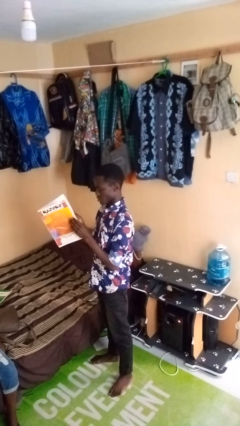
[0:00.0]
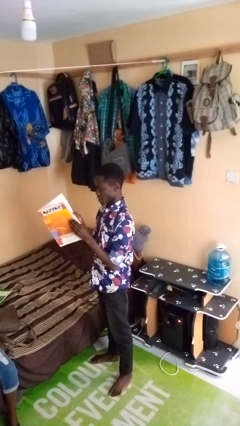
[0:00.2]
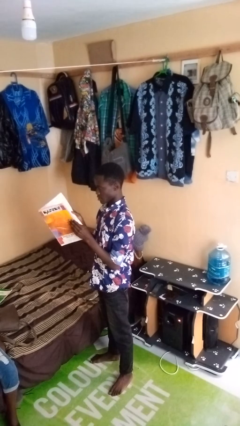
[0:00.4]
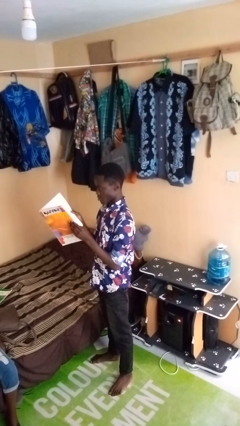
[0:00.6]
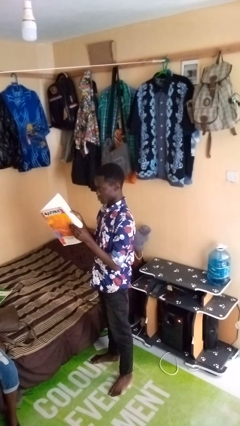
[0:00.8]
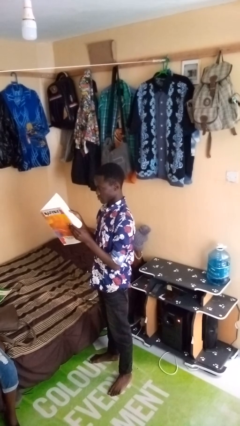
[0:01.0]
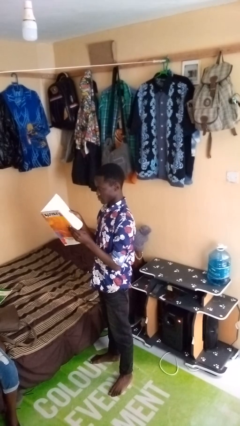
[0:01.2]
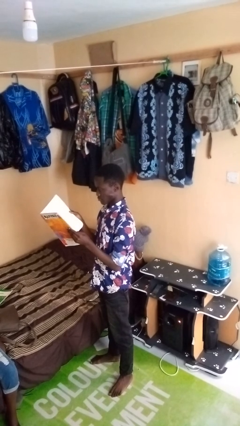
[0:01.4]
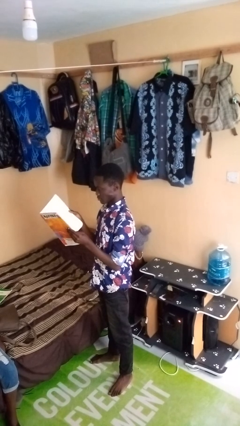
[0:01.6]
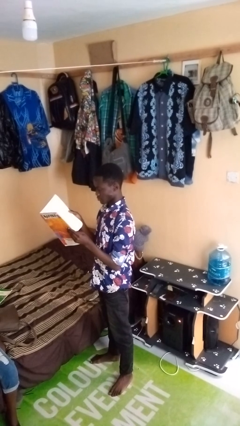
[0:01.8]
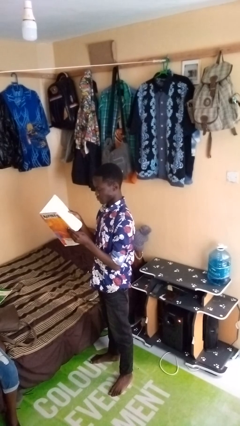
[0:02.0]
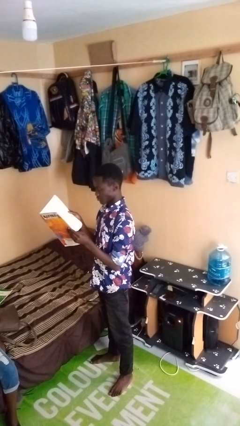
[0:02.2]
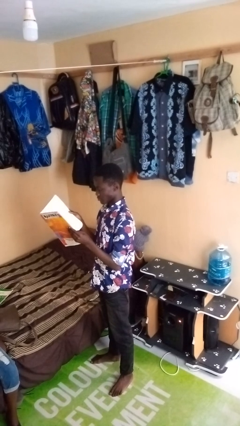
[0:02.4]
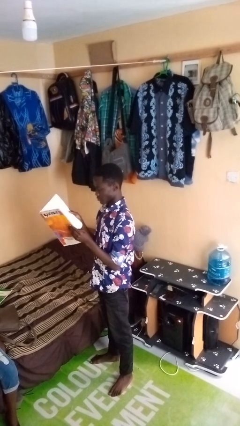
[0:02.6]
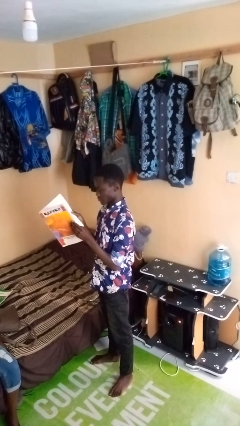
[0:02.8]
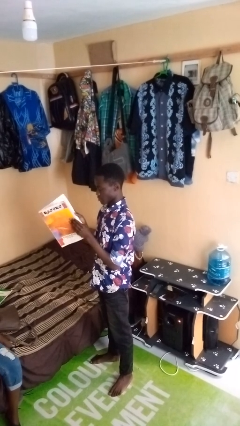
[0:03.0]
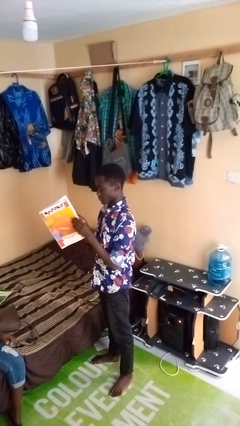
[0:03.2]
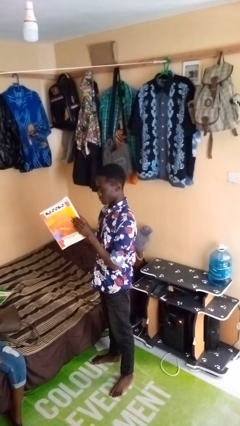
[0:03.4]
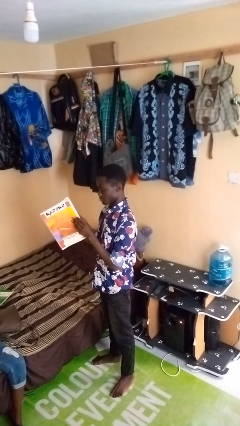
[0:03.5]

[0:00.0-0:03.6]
person reads newspaper

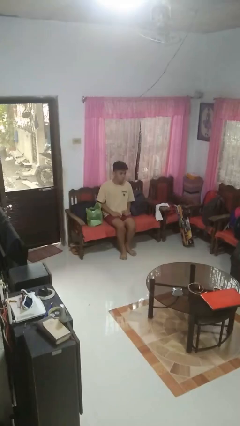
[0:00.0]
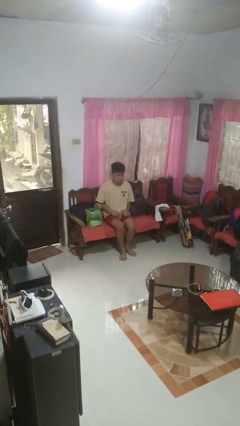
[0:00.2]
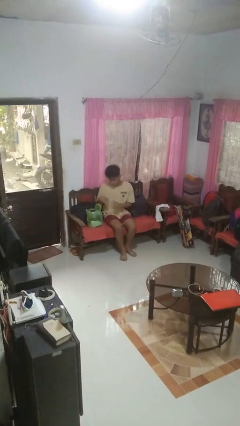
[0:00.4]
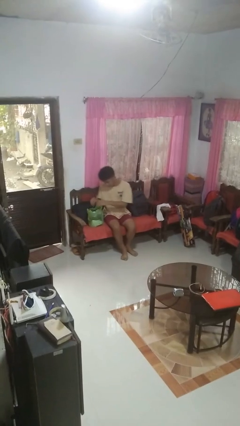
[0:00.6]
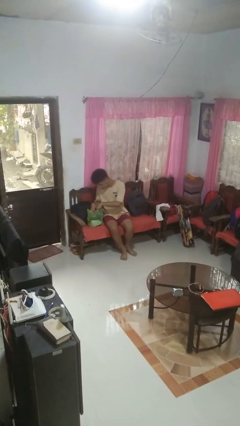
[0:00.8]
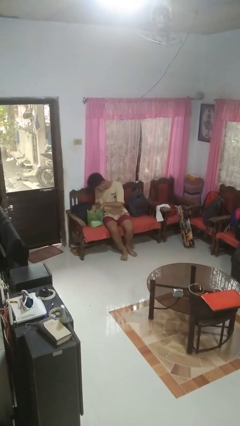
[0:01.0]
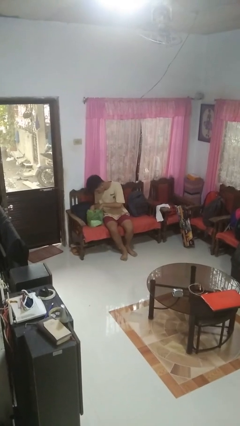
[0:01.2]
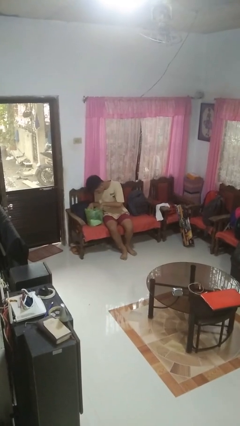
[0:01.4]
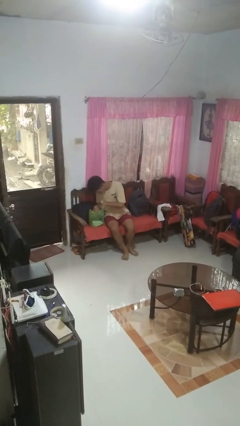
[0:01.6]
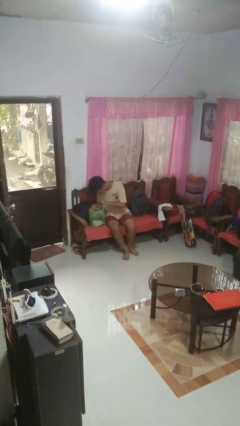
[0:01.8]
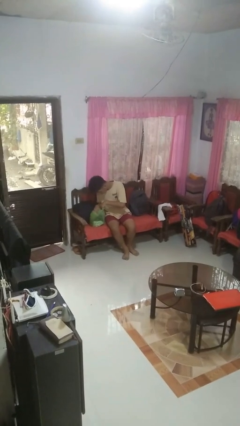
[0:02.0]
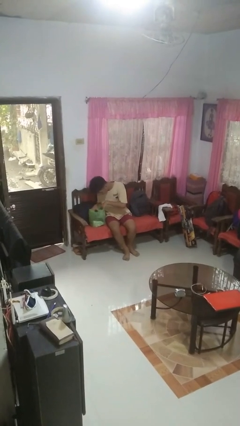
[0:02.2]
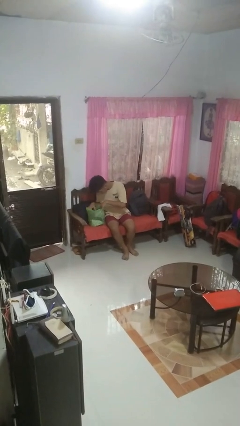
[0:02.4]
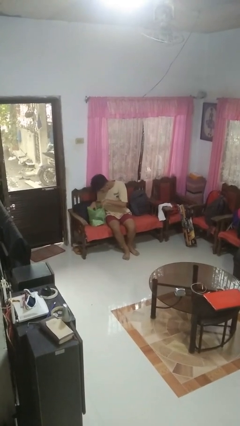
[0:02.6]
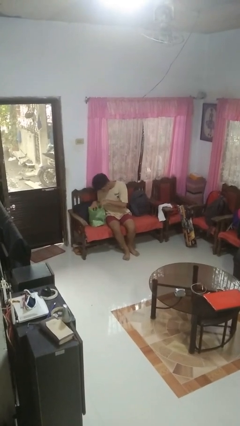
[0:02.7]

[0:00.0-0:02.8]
person searches in bag

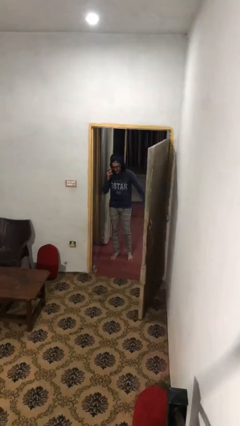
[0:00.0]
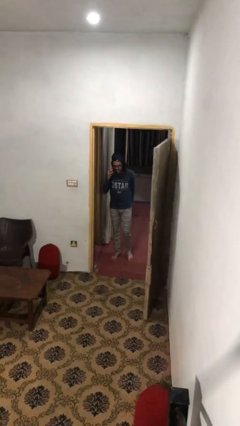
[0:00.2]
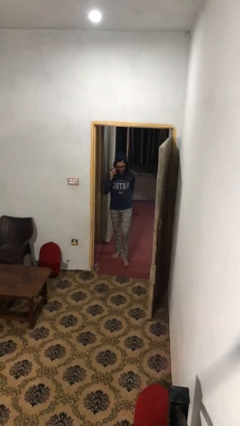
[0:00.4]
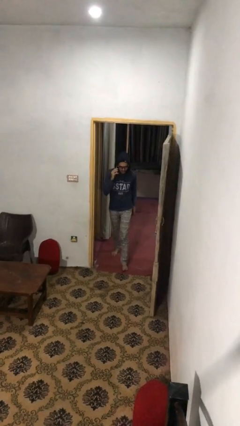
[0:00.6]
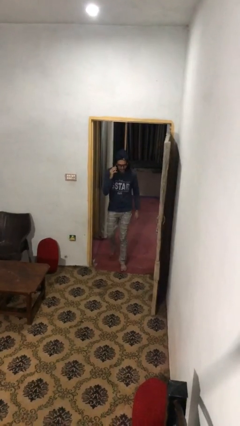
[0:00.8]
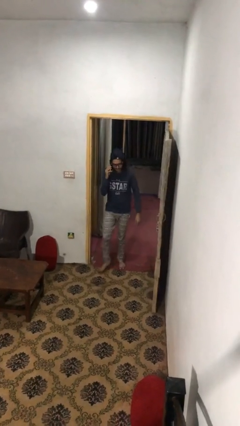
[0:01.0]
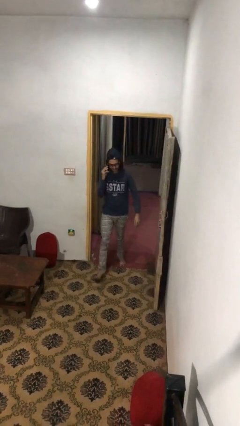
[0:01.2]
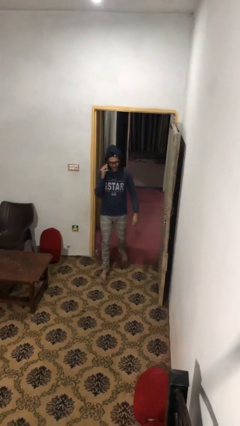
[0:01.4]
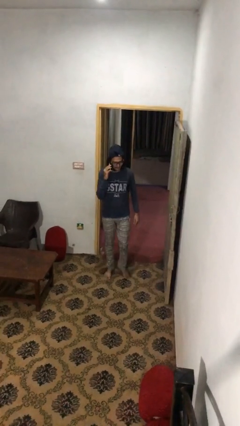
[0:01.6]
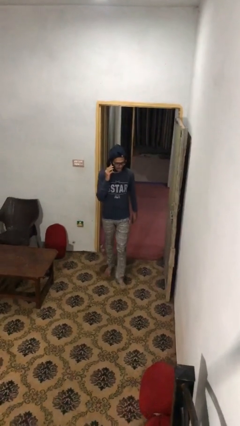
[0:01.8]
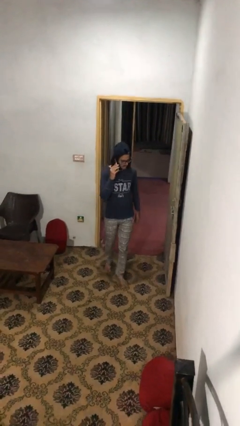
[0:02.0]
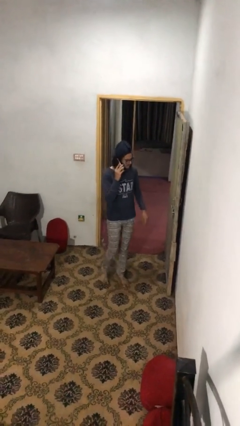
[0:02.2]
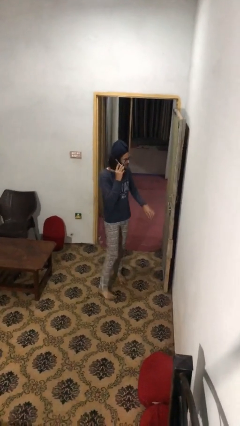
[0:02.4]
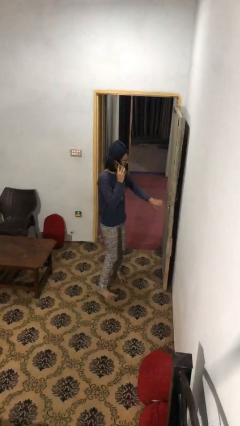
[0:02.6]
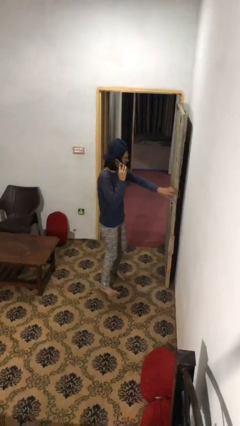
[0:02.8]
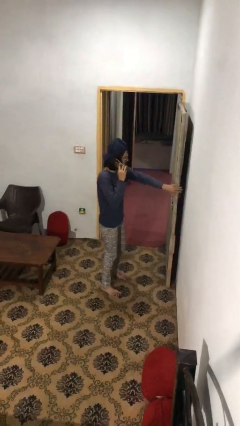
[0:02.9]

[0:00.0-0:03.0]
person enters scene through structure

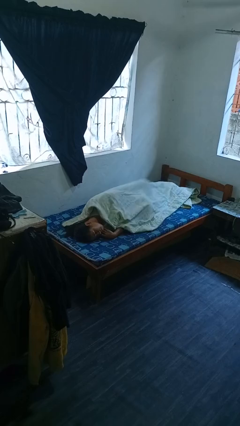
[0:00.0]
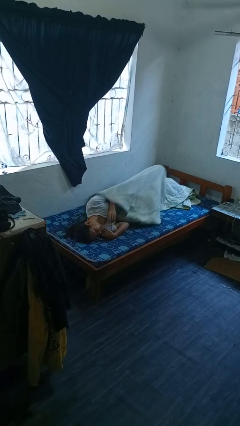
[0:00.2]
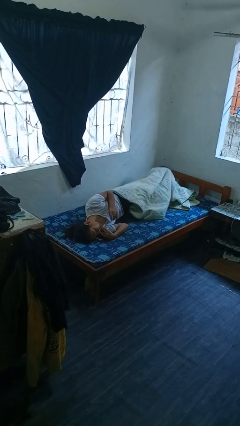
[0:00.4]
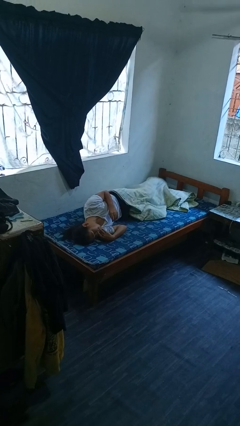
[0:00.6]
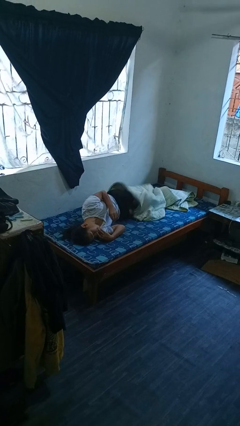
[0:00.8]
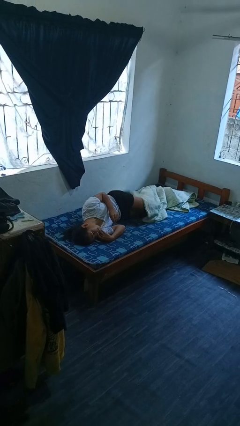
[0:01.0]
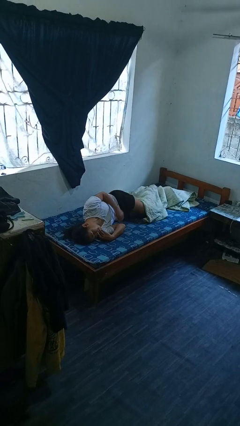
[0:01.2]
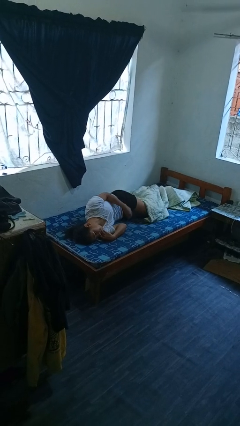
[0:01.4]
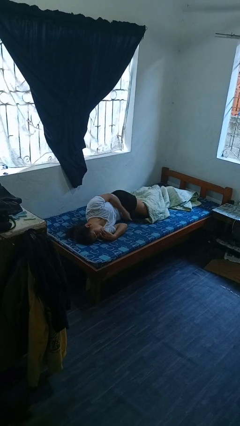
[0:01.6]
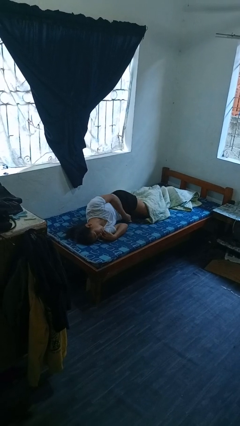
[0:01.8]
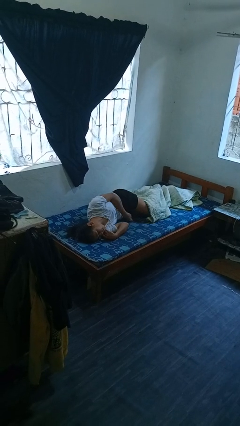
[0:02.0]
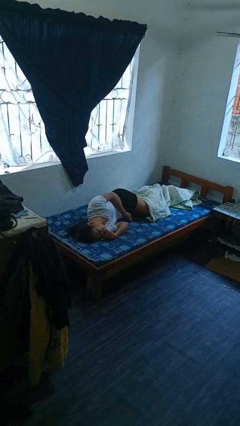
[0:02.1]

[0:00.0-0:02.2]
person uncovers with bedsheets

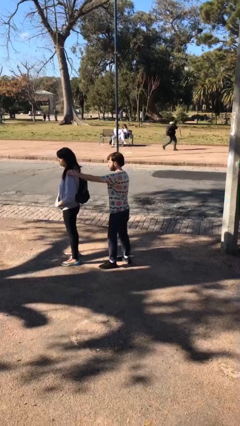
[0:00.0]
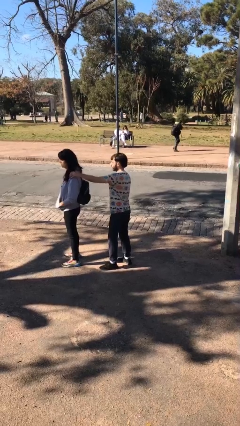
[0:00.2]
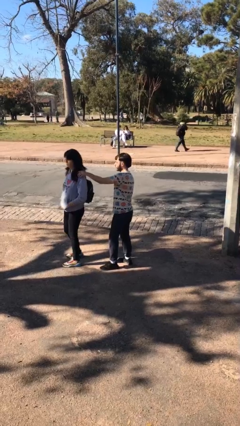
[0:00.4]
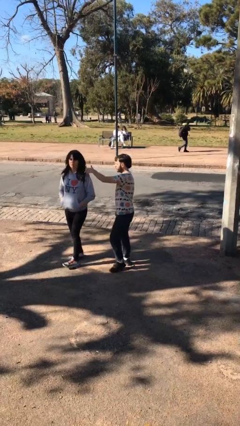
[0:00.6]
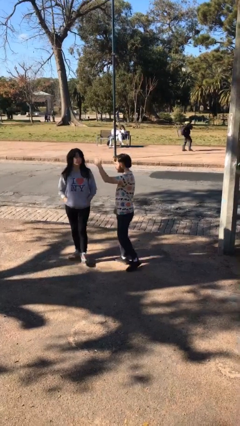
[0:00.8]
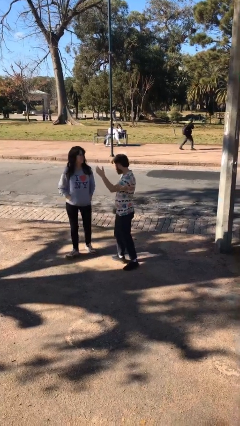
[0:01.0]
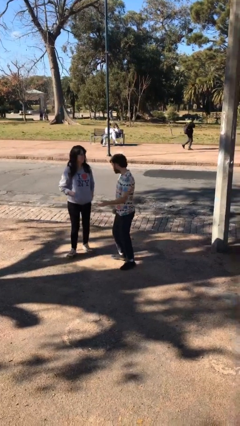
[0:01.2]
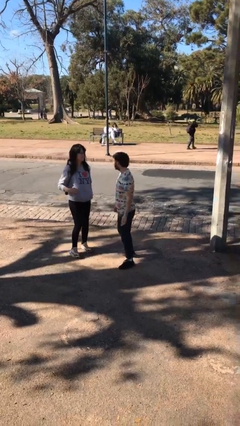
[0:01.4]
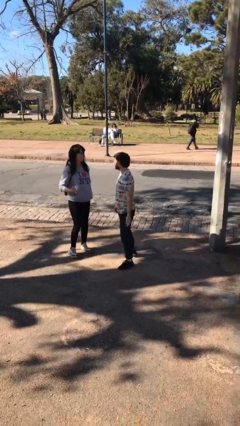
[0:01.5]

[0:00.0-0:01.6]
person spins person around

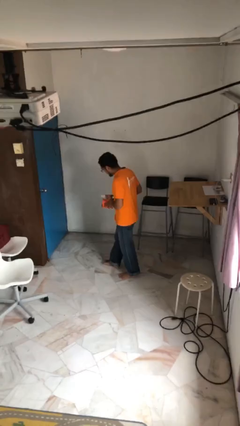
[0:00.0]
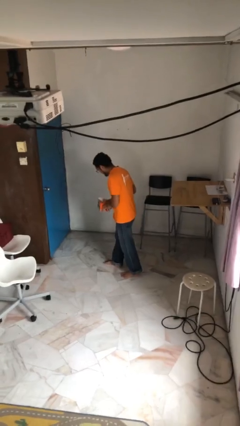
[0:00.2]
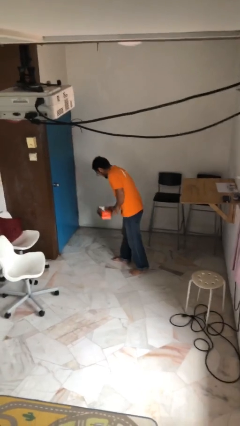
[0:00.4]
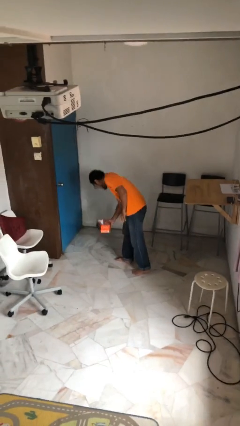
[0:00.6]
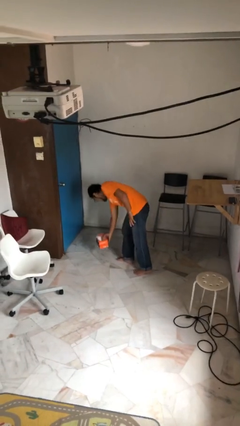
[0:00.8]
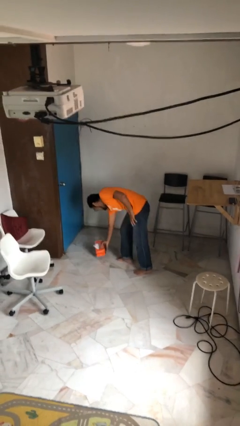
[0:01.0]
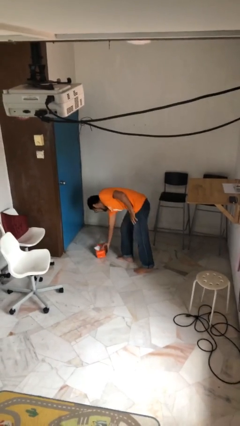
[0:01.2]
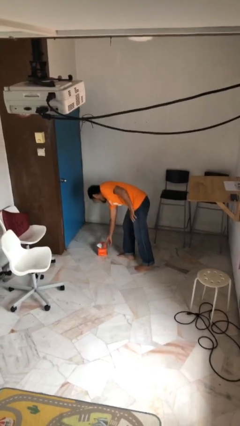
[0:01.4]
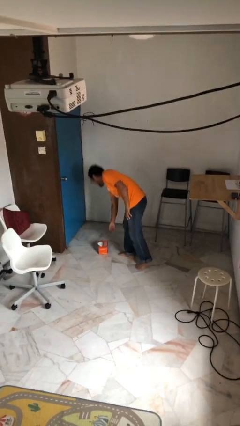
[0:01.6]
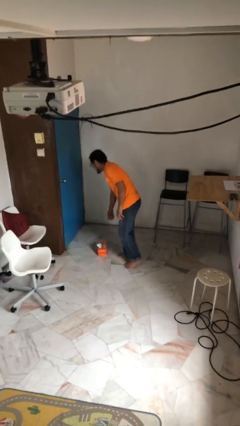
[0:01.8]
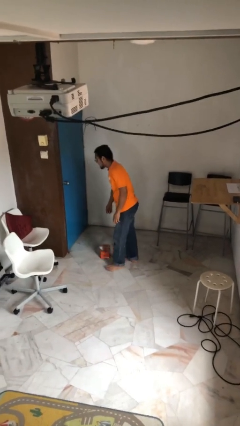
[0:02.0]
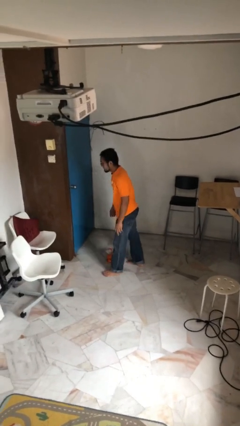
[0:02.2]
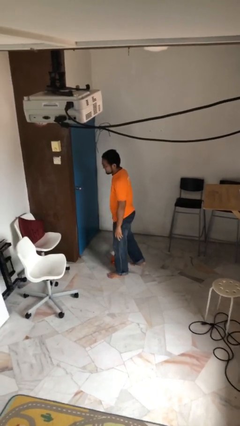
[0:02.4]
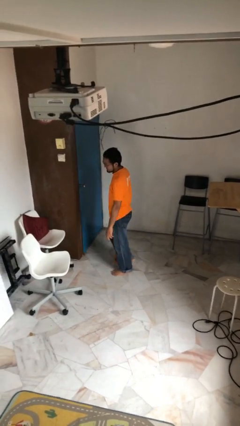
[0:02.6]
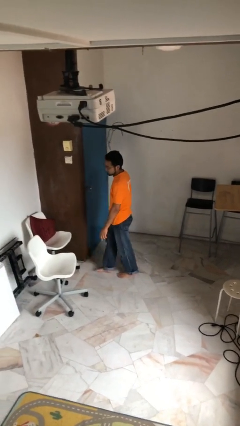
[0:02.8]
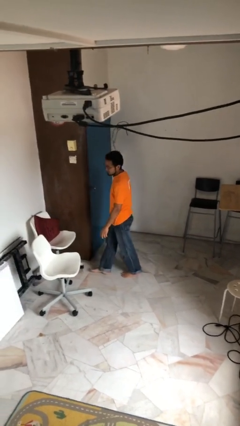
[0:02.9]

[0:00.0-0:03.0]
person puts down object on floor

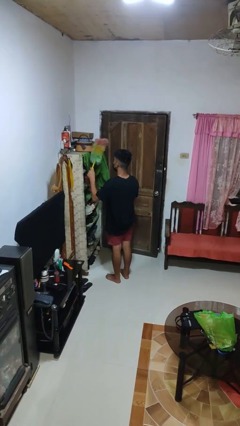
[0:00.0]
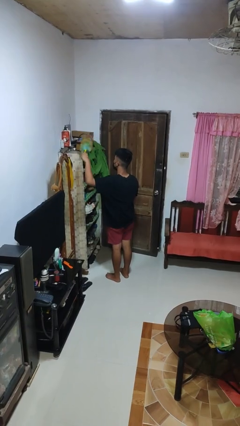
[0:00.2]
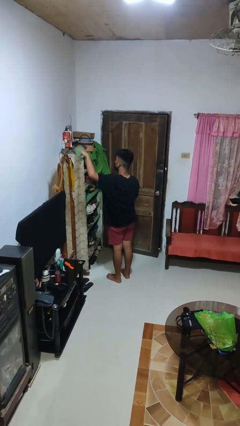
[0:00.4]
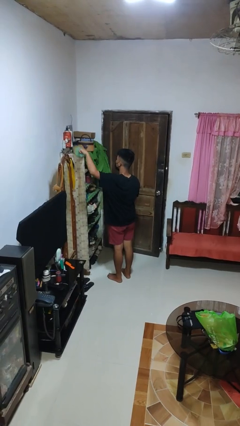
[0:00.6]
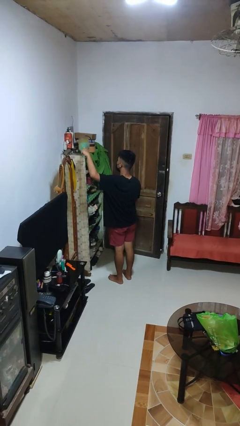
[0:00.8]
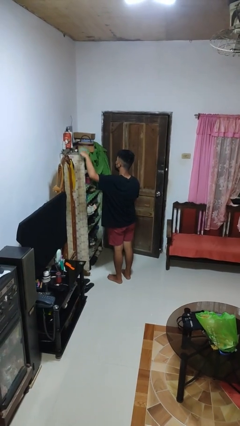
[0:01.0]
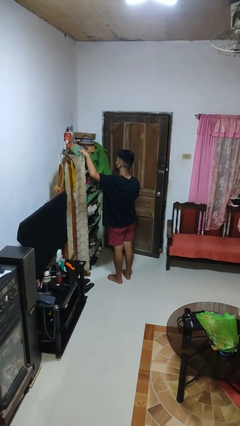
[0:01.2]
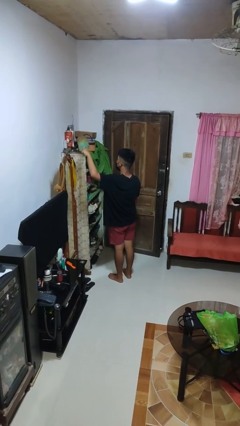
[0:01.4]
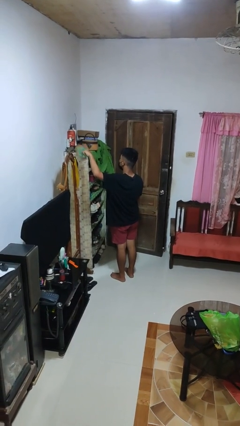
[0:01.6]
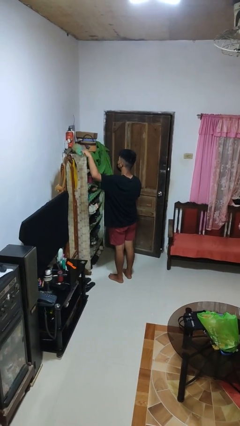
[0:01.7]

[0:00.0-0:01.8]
person dusts furniture
